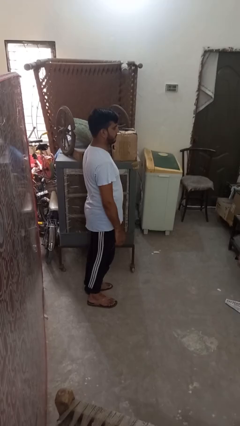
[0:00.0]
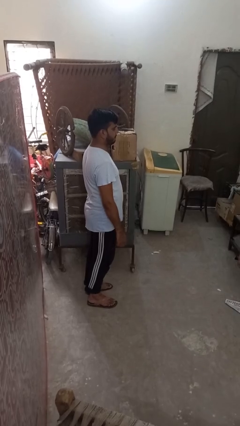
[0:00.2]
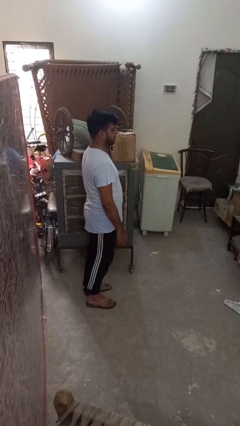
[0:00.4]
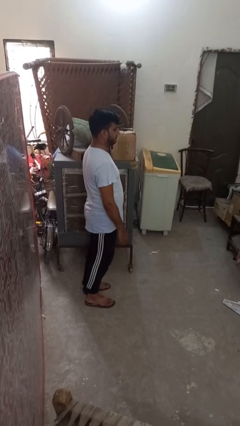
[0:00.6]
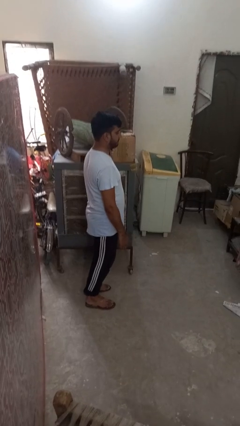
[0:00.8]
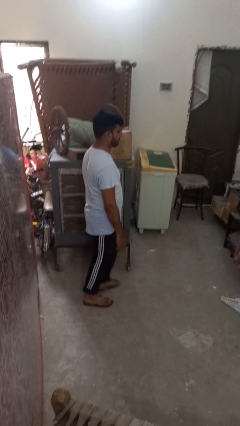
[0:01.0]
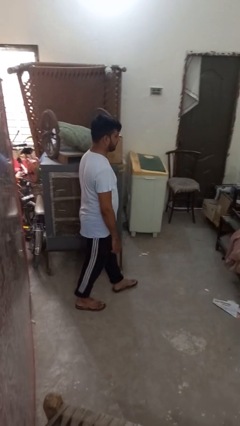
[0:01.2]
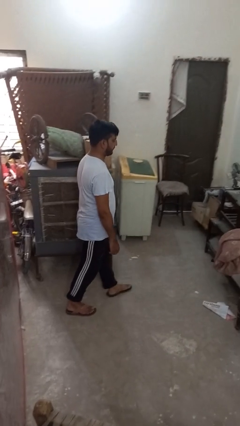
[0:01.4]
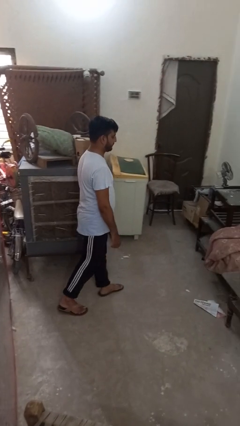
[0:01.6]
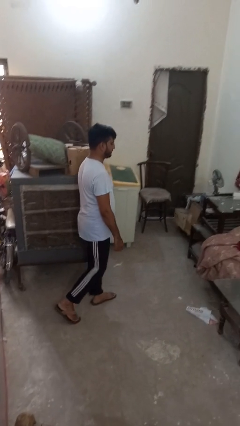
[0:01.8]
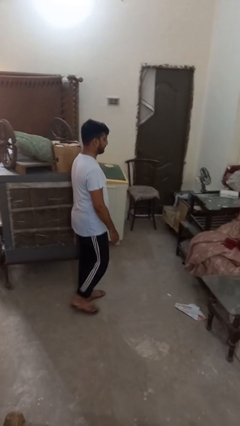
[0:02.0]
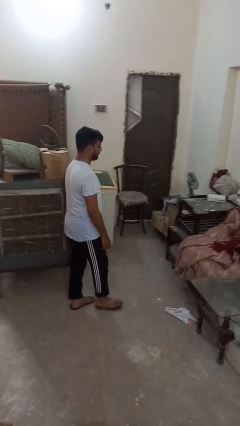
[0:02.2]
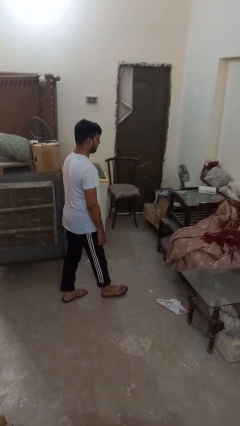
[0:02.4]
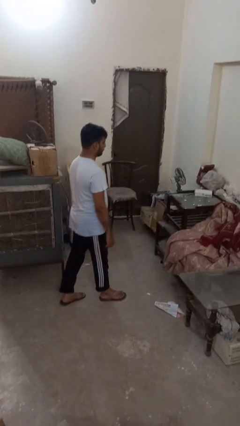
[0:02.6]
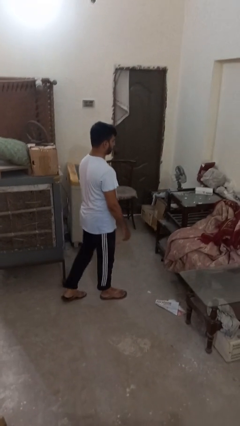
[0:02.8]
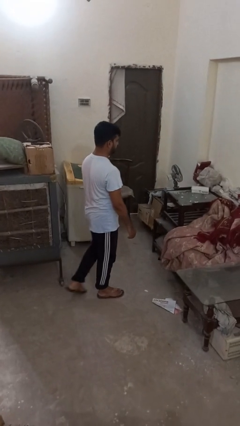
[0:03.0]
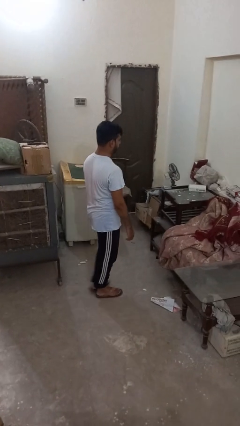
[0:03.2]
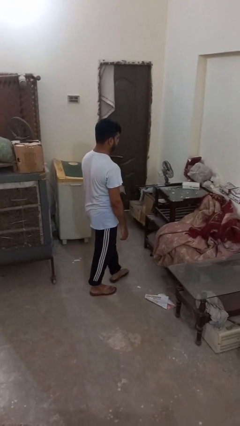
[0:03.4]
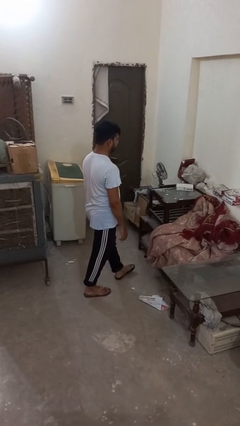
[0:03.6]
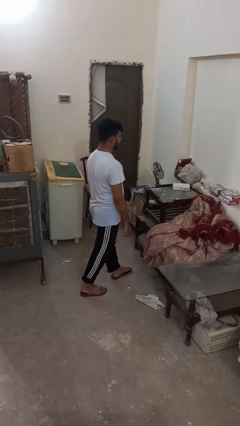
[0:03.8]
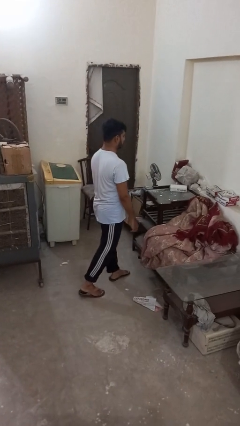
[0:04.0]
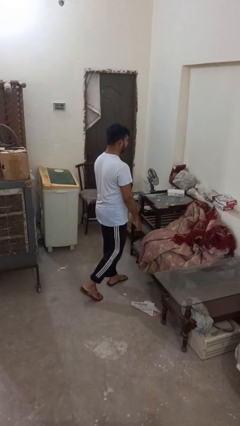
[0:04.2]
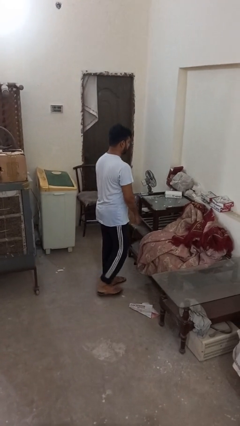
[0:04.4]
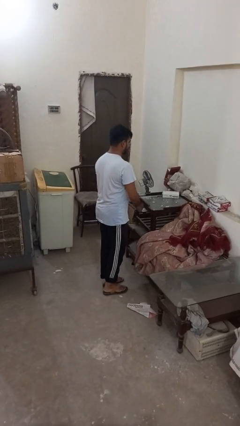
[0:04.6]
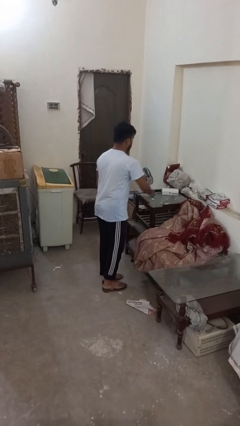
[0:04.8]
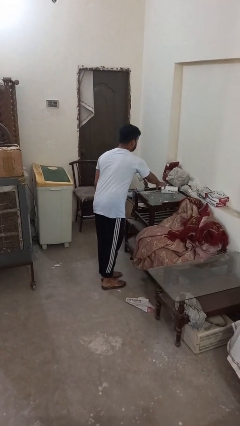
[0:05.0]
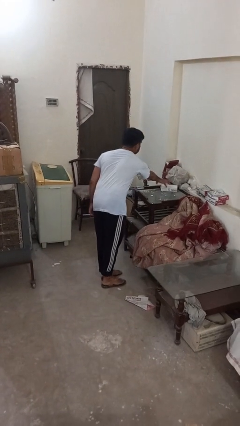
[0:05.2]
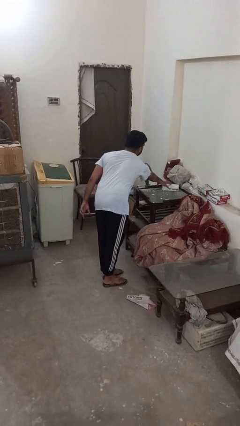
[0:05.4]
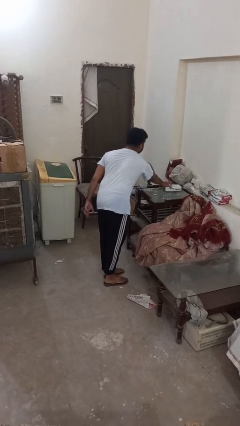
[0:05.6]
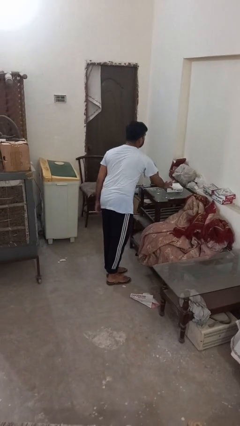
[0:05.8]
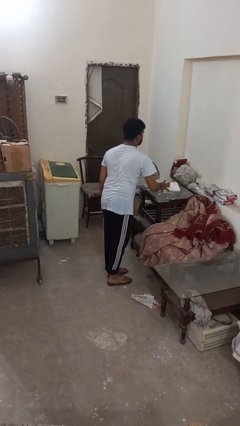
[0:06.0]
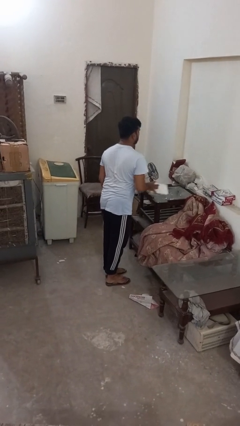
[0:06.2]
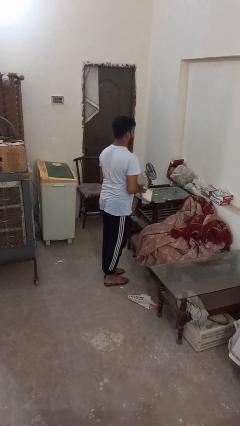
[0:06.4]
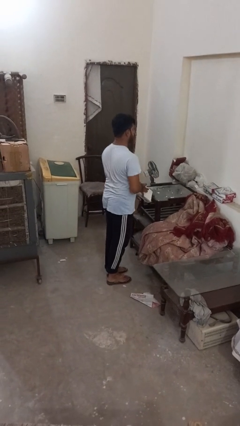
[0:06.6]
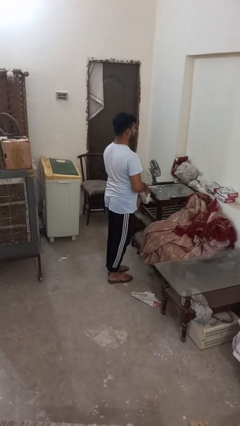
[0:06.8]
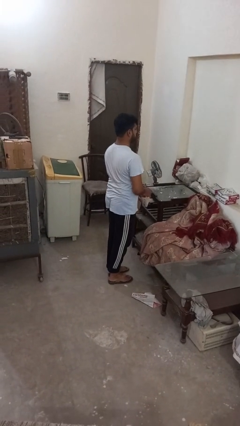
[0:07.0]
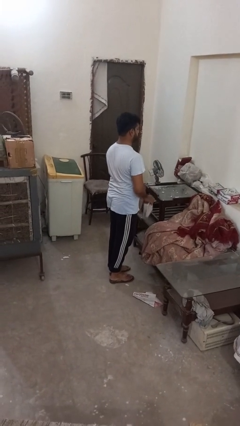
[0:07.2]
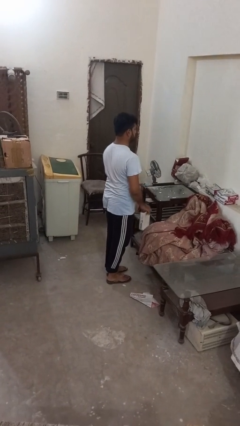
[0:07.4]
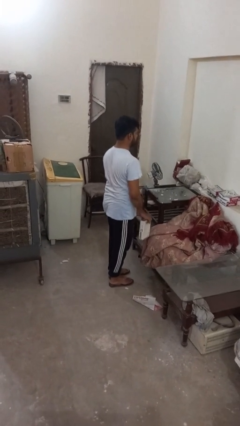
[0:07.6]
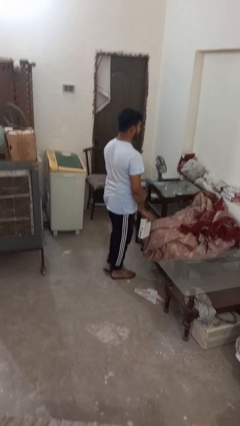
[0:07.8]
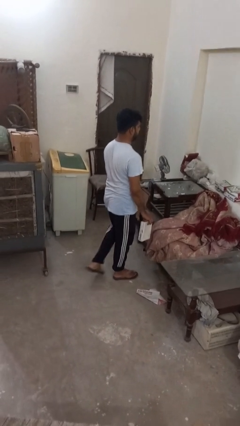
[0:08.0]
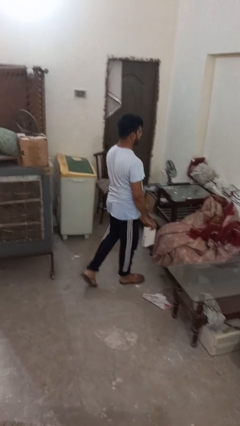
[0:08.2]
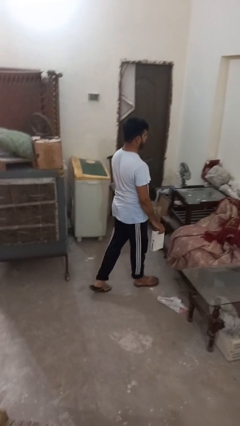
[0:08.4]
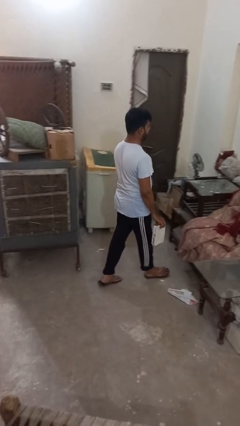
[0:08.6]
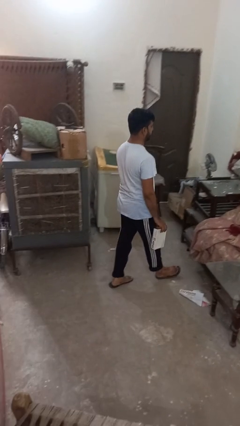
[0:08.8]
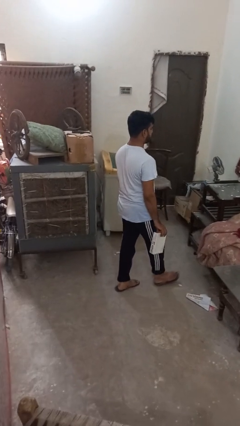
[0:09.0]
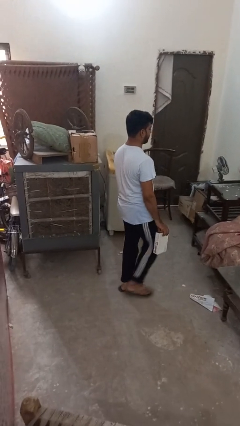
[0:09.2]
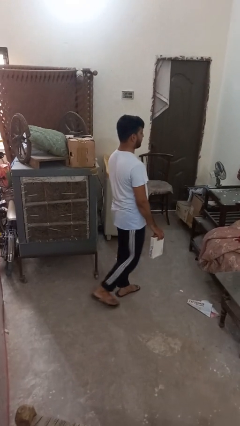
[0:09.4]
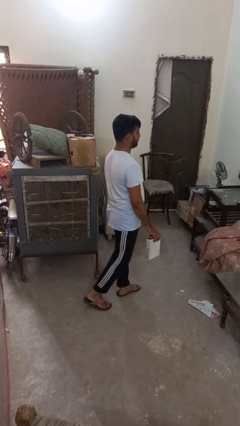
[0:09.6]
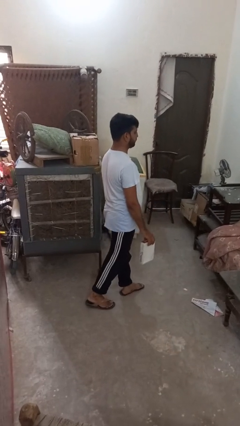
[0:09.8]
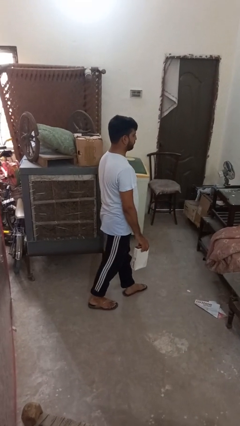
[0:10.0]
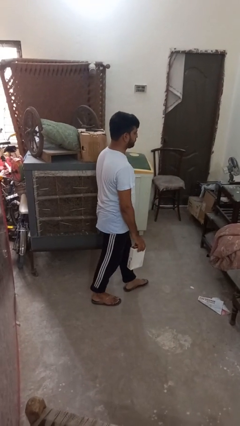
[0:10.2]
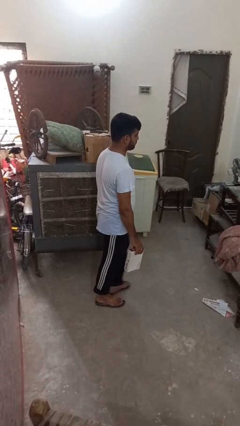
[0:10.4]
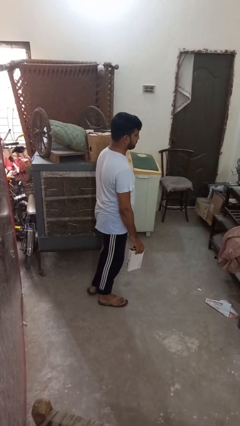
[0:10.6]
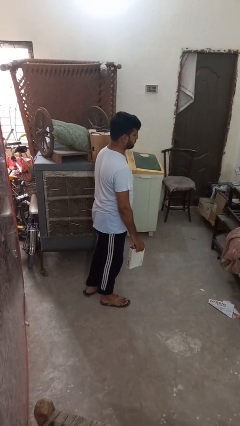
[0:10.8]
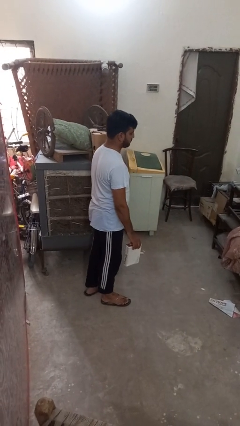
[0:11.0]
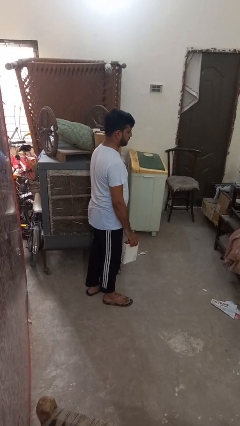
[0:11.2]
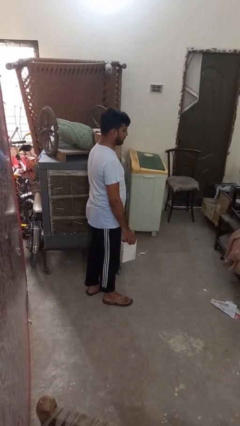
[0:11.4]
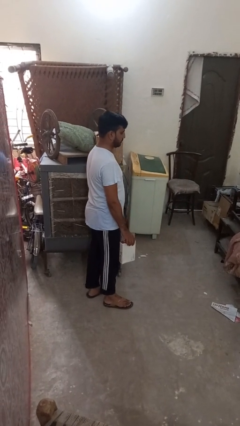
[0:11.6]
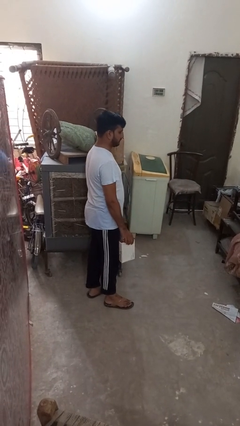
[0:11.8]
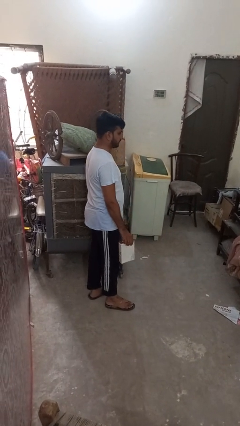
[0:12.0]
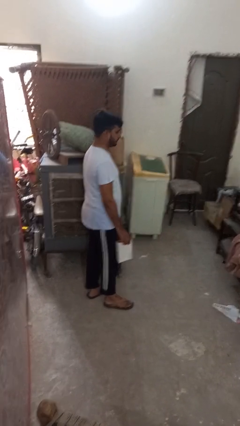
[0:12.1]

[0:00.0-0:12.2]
person picks up object from table

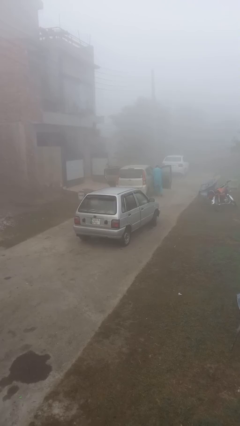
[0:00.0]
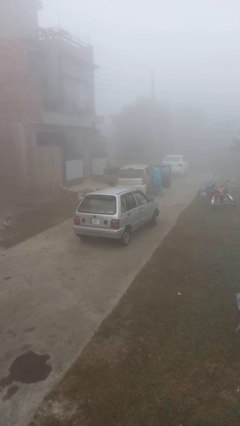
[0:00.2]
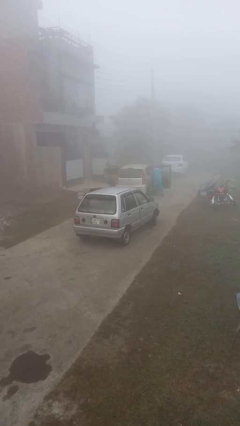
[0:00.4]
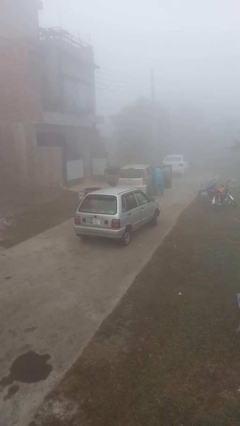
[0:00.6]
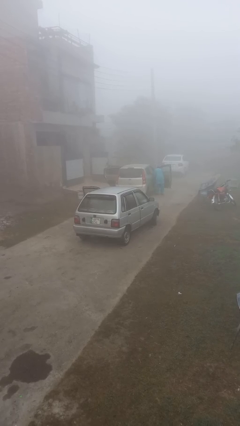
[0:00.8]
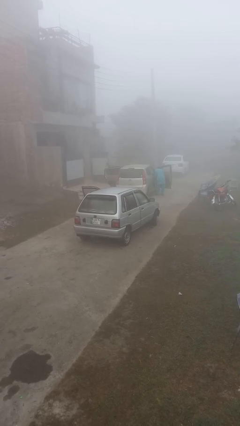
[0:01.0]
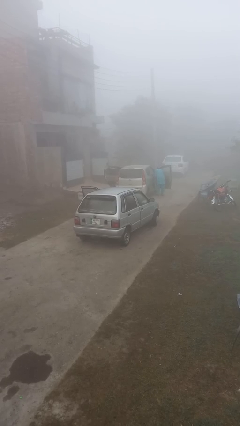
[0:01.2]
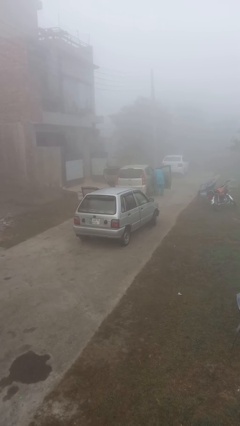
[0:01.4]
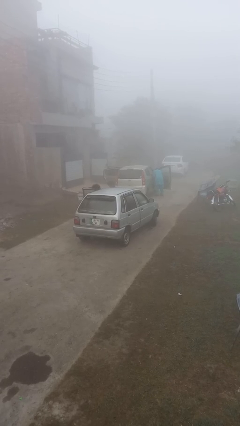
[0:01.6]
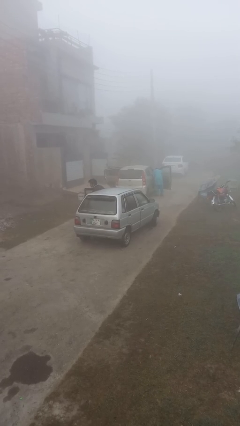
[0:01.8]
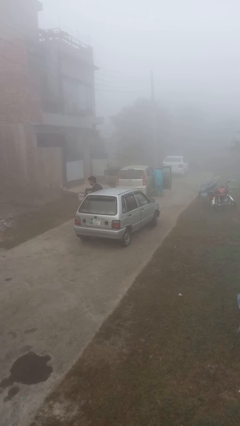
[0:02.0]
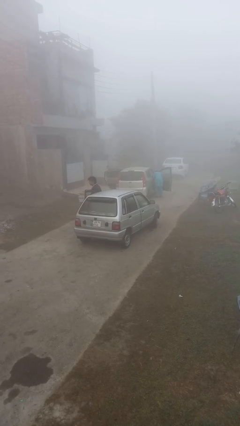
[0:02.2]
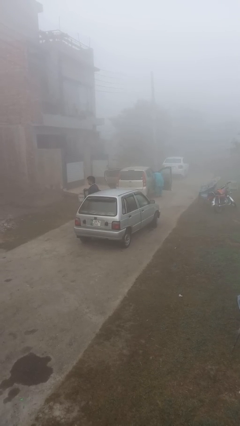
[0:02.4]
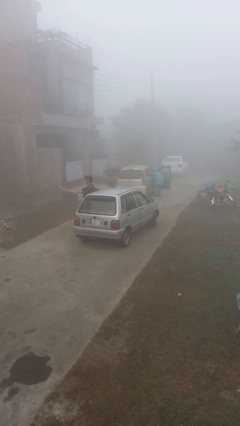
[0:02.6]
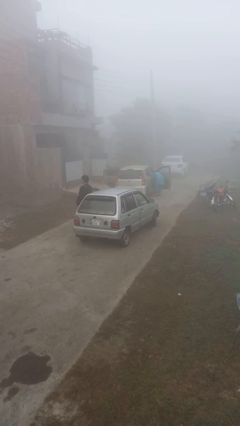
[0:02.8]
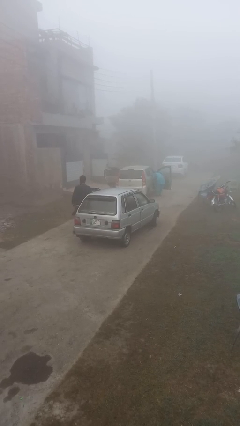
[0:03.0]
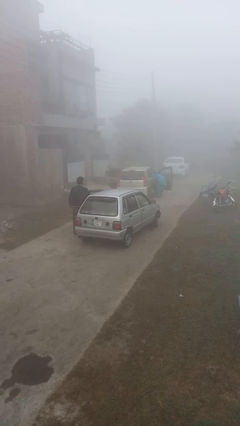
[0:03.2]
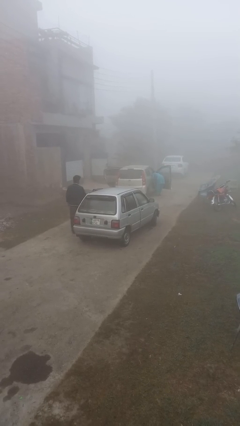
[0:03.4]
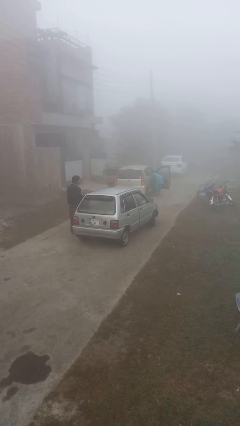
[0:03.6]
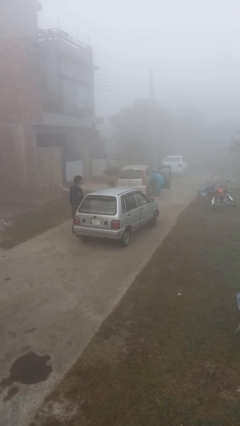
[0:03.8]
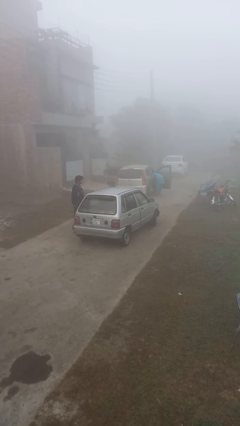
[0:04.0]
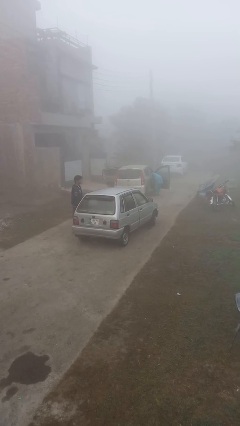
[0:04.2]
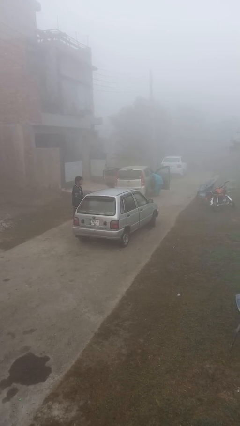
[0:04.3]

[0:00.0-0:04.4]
car drops off person

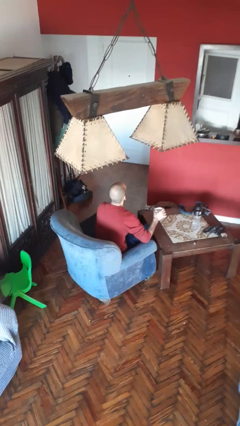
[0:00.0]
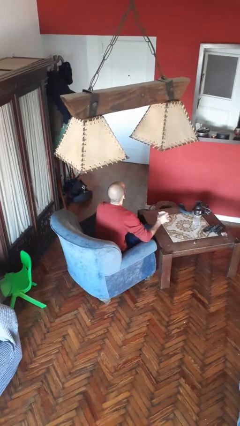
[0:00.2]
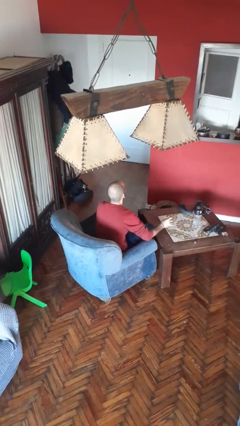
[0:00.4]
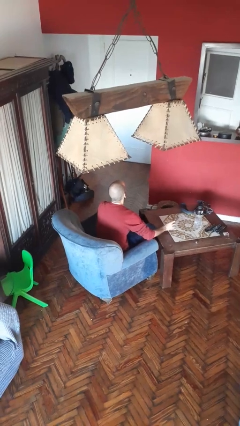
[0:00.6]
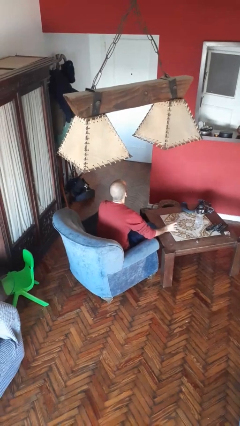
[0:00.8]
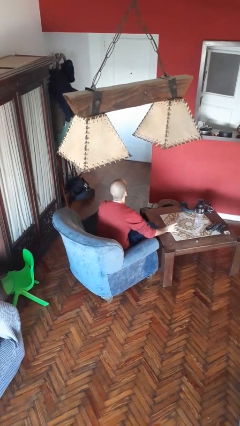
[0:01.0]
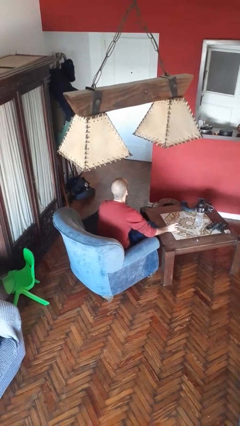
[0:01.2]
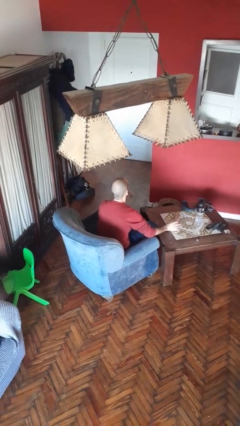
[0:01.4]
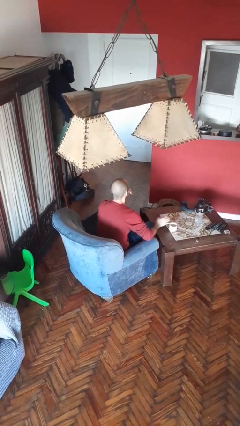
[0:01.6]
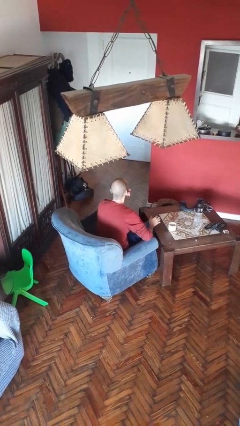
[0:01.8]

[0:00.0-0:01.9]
person puts down object on table
